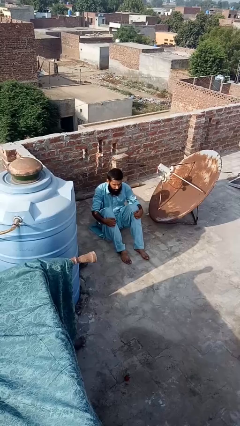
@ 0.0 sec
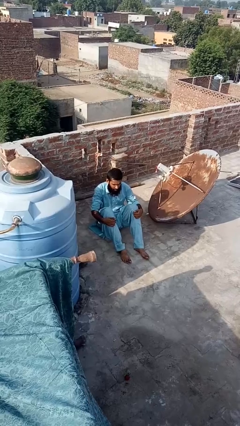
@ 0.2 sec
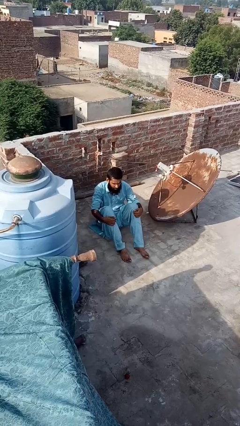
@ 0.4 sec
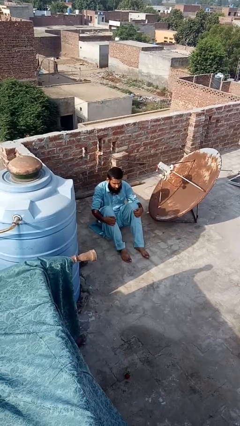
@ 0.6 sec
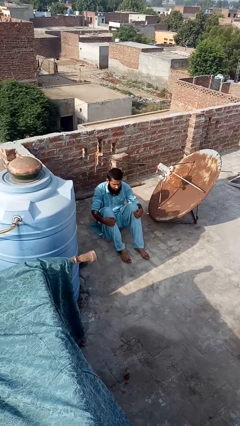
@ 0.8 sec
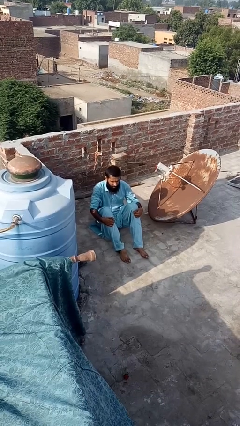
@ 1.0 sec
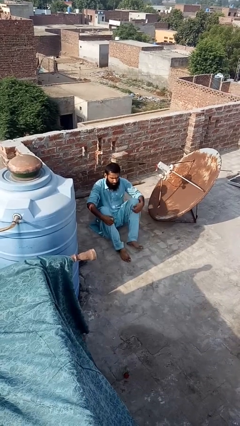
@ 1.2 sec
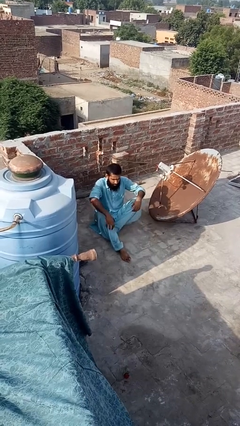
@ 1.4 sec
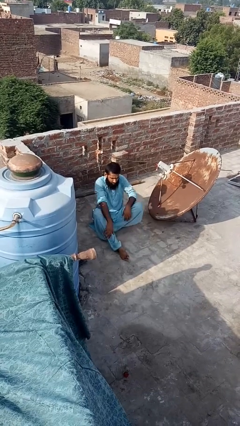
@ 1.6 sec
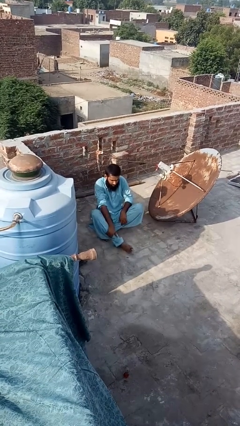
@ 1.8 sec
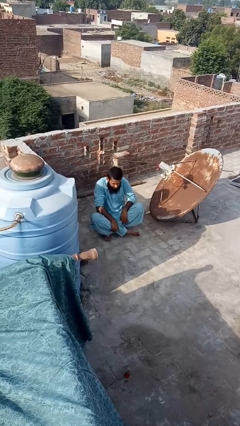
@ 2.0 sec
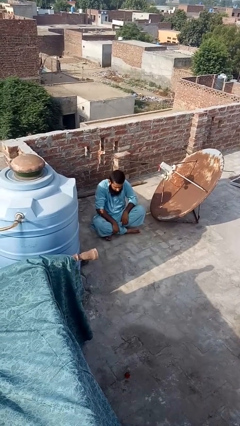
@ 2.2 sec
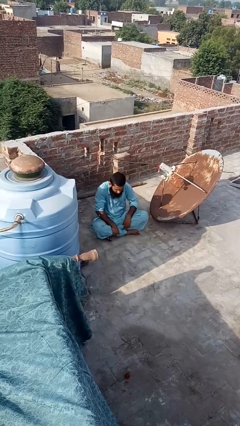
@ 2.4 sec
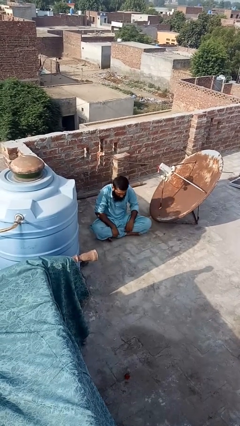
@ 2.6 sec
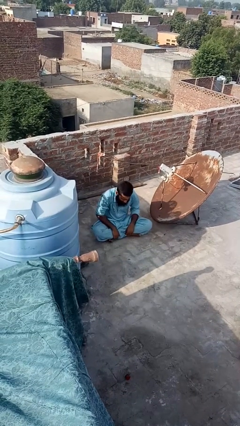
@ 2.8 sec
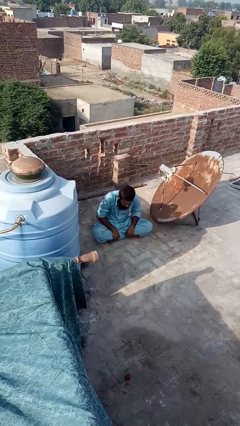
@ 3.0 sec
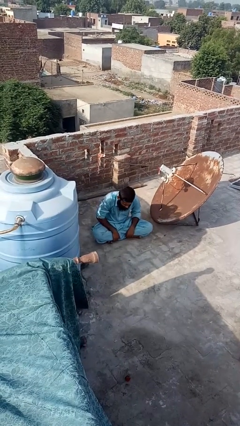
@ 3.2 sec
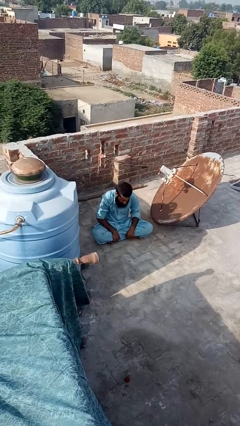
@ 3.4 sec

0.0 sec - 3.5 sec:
person crosses legs

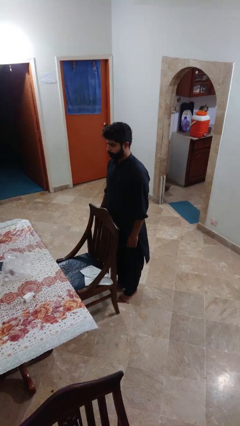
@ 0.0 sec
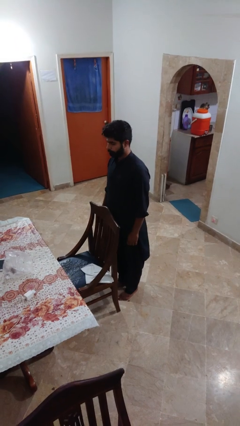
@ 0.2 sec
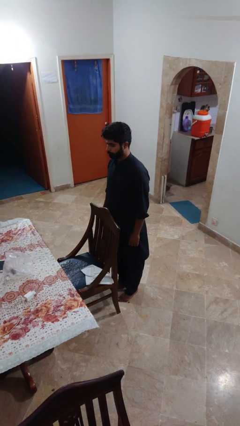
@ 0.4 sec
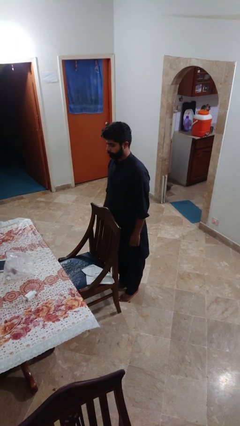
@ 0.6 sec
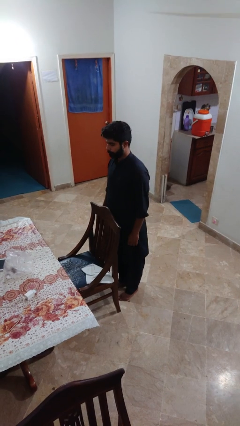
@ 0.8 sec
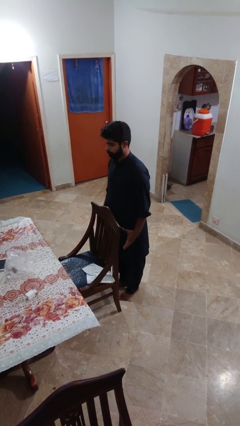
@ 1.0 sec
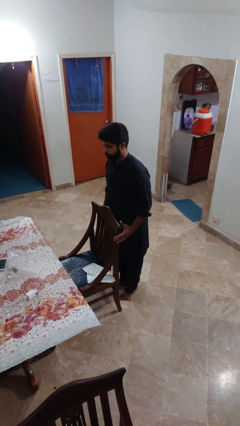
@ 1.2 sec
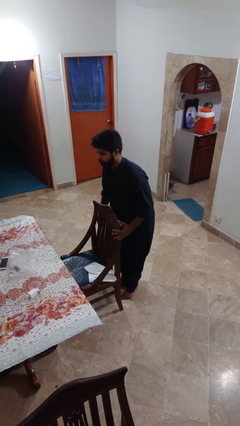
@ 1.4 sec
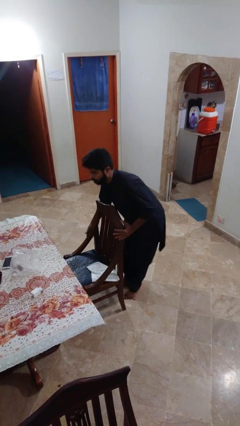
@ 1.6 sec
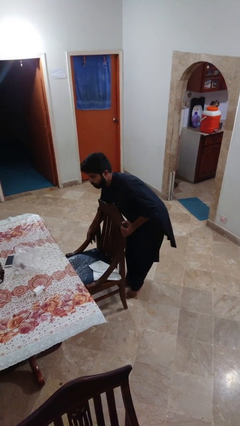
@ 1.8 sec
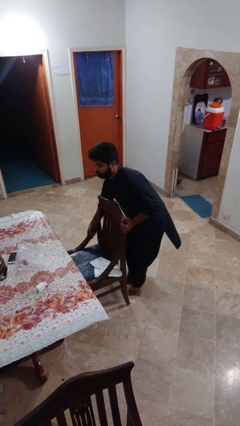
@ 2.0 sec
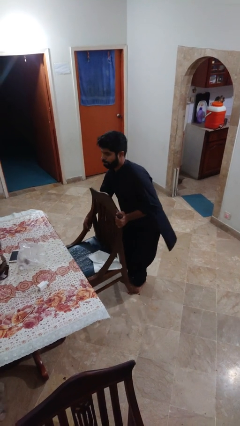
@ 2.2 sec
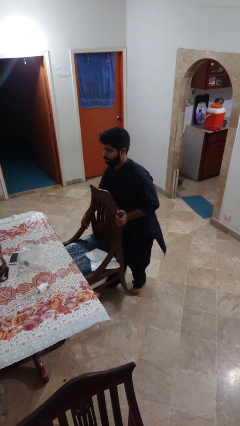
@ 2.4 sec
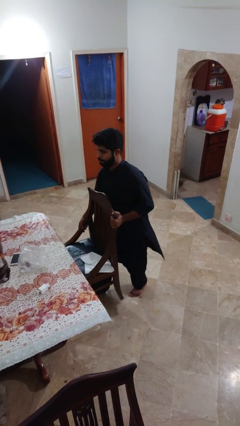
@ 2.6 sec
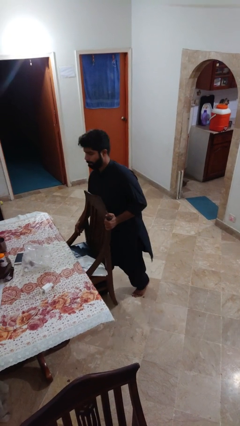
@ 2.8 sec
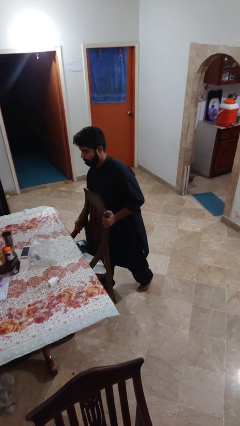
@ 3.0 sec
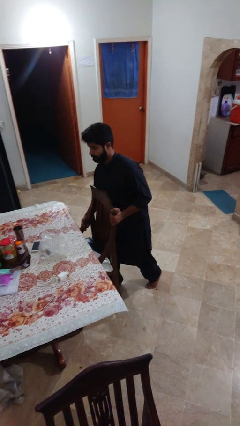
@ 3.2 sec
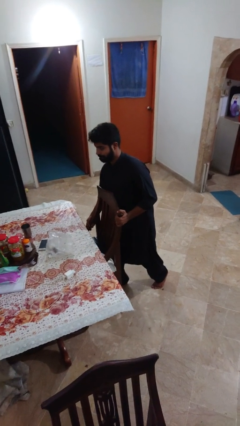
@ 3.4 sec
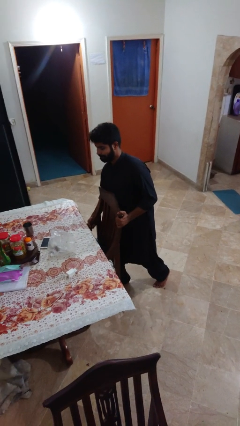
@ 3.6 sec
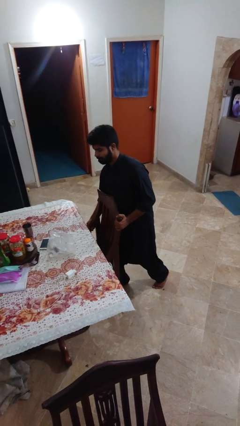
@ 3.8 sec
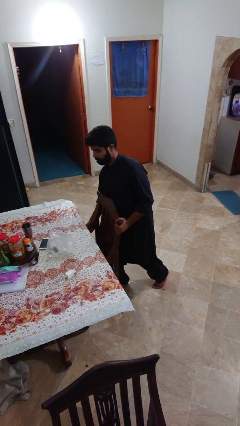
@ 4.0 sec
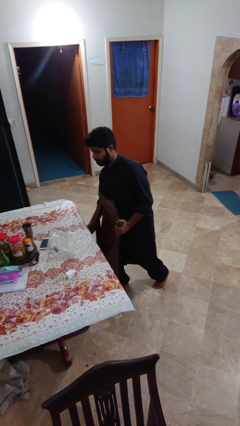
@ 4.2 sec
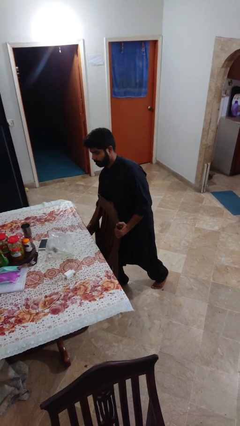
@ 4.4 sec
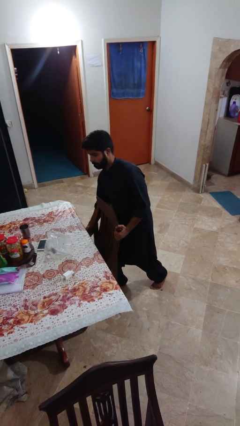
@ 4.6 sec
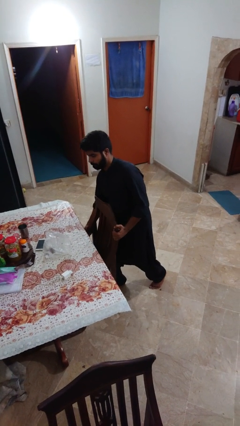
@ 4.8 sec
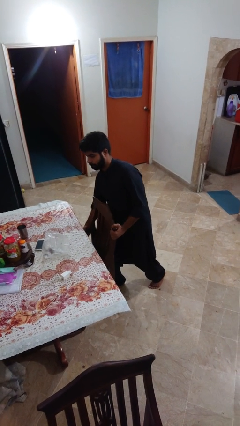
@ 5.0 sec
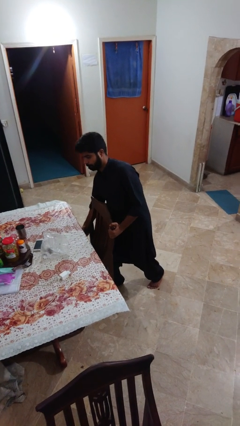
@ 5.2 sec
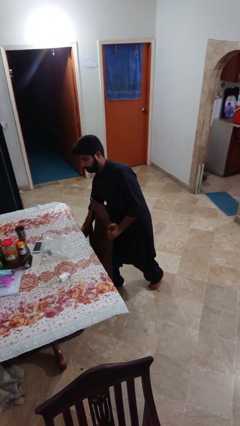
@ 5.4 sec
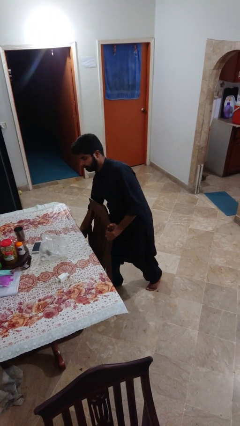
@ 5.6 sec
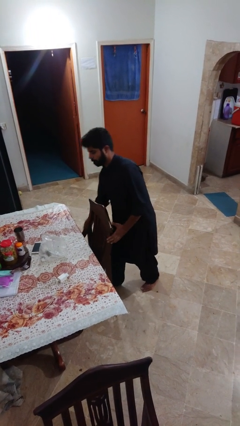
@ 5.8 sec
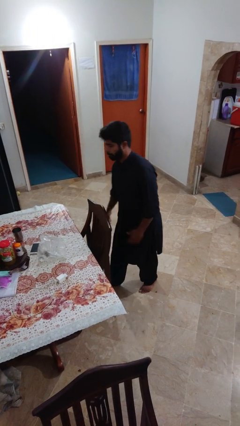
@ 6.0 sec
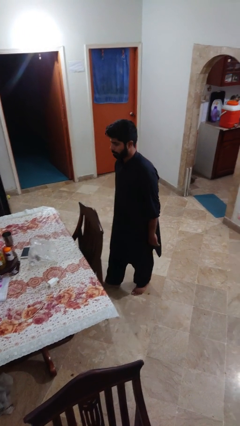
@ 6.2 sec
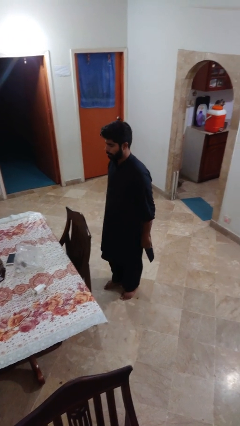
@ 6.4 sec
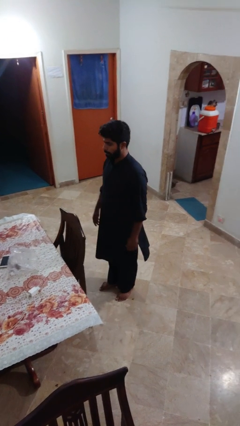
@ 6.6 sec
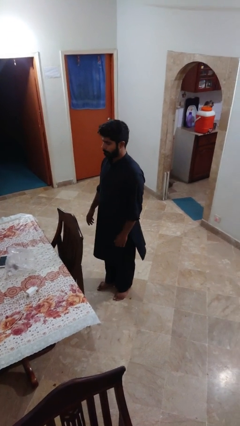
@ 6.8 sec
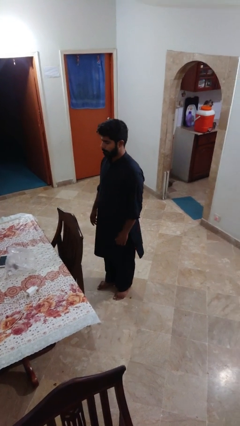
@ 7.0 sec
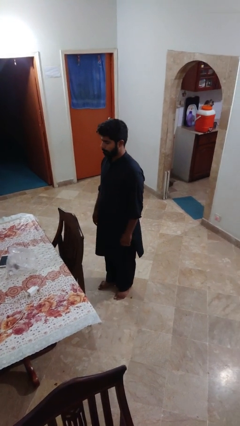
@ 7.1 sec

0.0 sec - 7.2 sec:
person pushes in chair

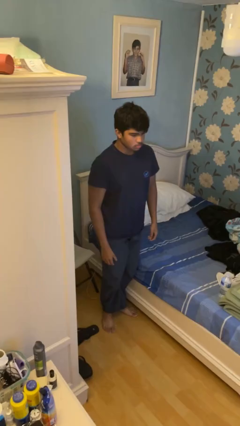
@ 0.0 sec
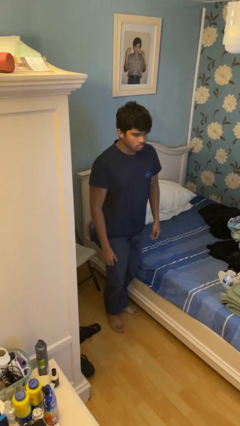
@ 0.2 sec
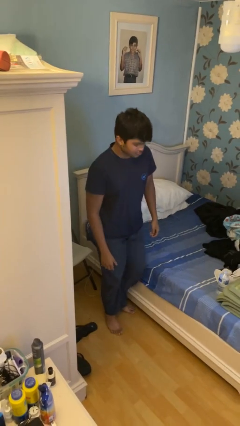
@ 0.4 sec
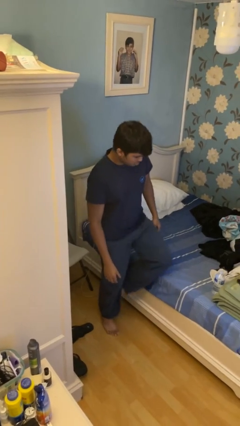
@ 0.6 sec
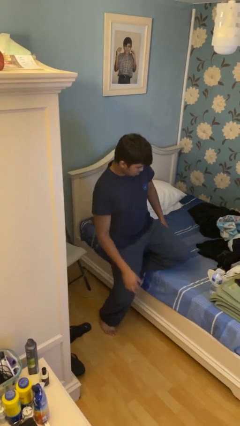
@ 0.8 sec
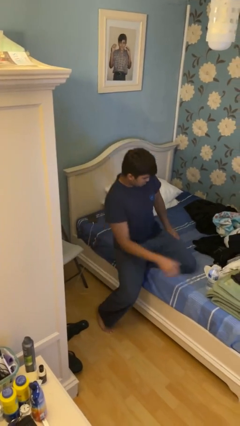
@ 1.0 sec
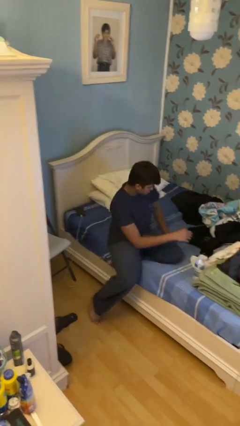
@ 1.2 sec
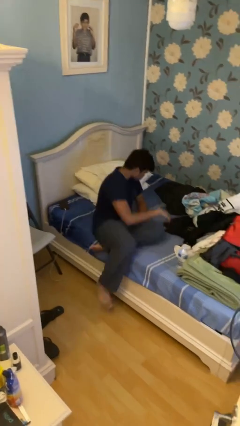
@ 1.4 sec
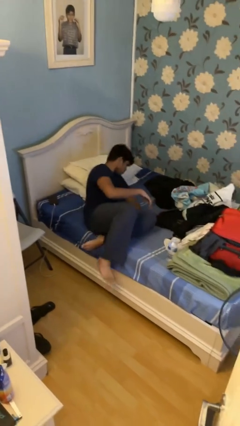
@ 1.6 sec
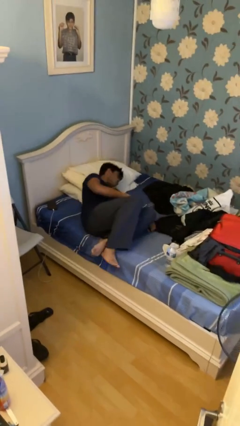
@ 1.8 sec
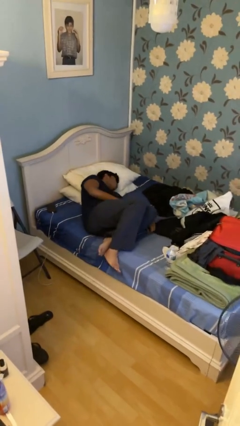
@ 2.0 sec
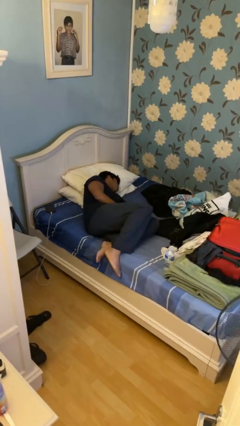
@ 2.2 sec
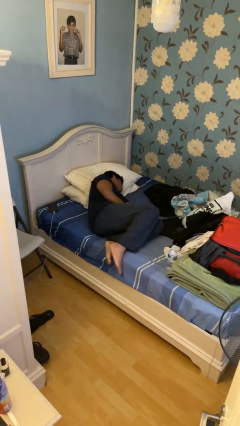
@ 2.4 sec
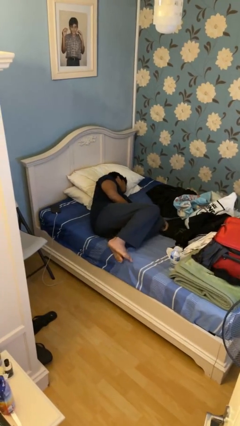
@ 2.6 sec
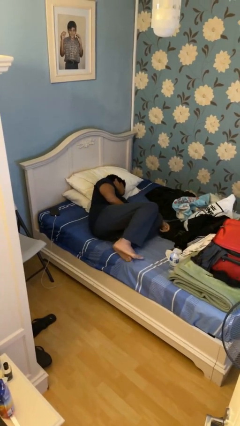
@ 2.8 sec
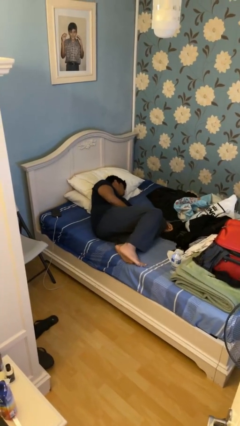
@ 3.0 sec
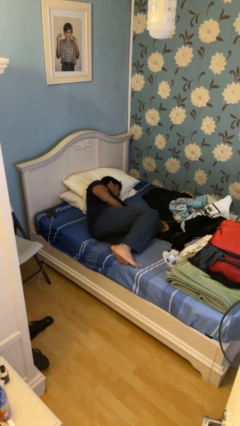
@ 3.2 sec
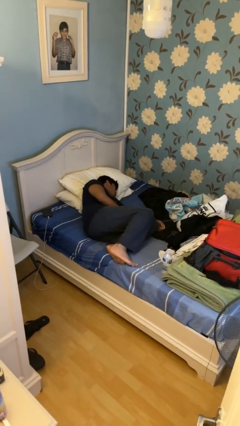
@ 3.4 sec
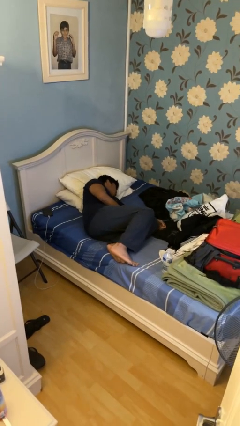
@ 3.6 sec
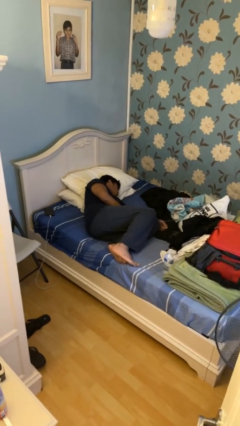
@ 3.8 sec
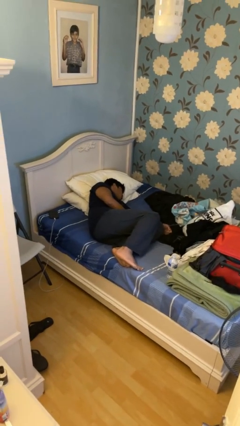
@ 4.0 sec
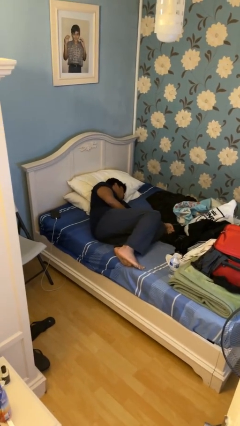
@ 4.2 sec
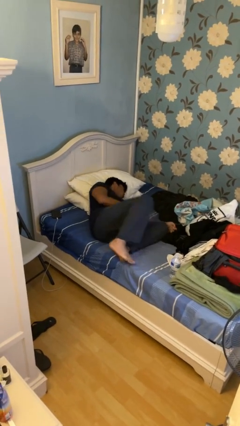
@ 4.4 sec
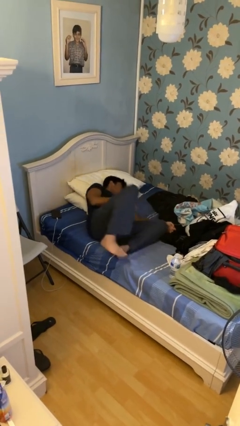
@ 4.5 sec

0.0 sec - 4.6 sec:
person lies down on bed

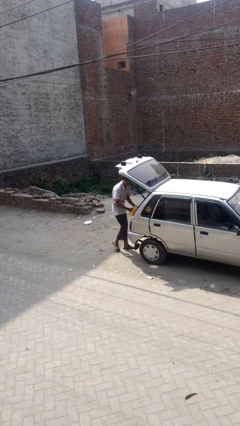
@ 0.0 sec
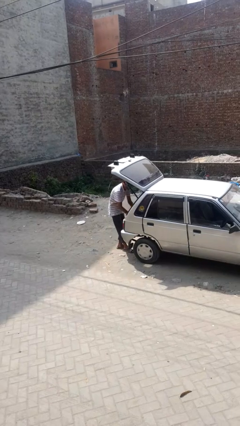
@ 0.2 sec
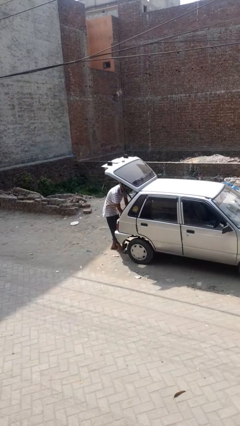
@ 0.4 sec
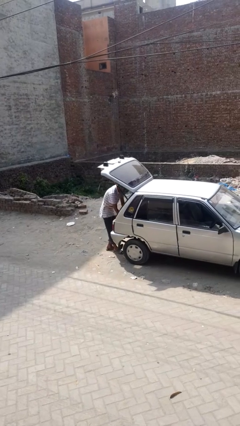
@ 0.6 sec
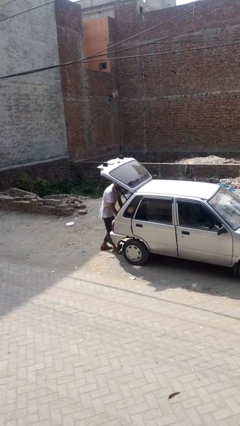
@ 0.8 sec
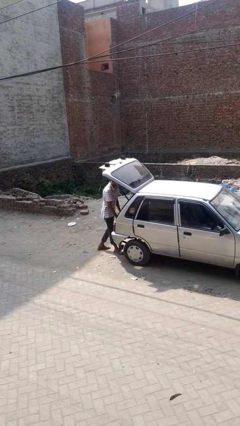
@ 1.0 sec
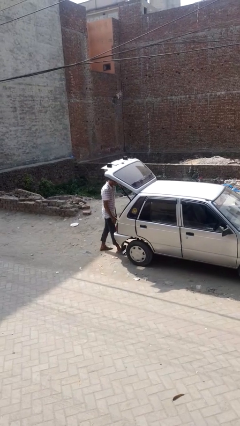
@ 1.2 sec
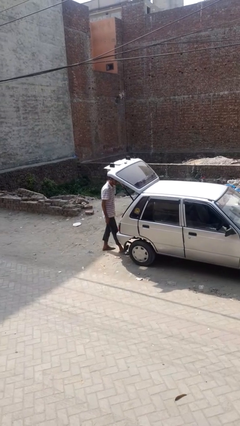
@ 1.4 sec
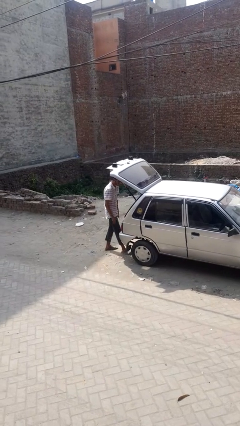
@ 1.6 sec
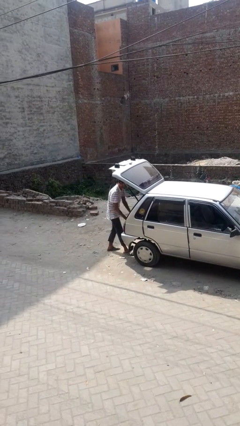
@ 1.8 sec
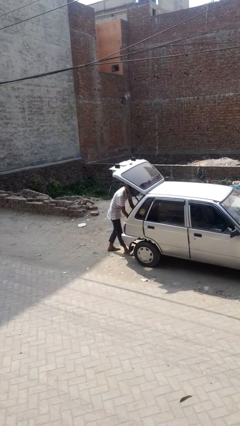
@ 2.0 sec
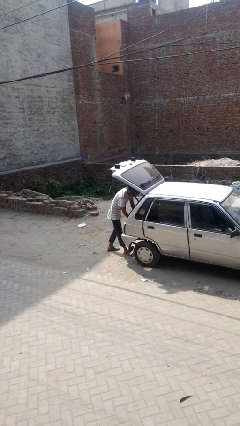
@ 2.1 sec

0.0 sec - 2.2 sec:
person loads car

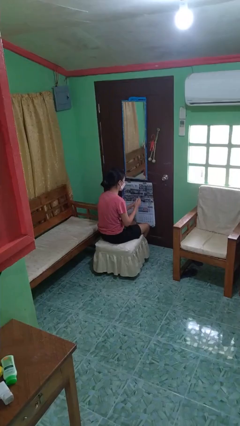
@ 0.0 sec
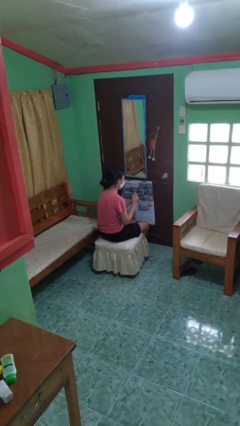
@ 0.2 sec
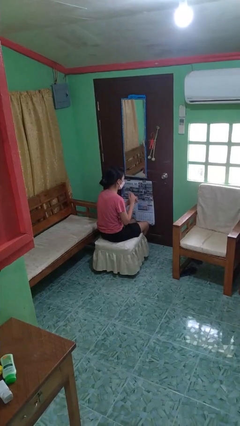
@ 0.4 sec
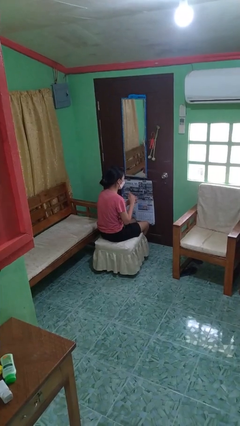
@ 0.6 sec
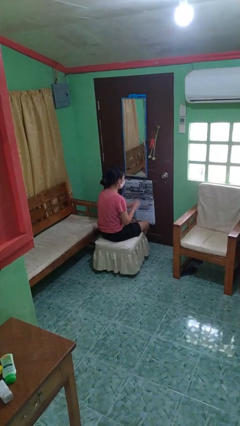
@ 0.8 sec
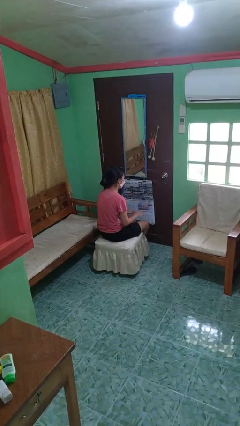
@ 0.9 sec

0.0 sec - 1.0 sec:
person puts on ring
